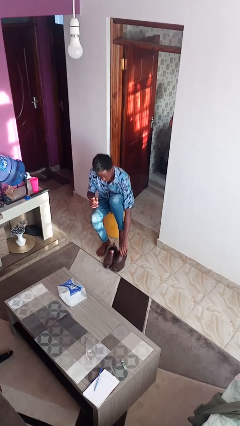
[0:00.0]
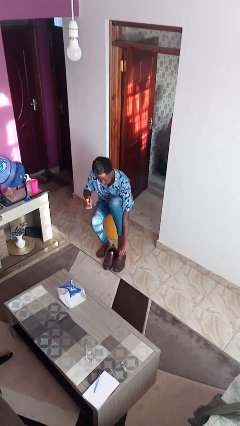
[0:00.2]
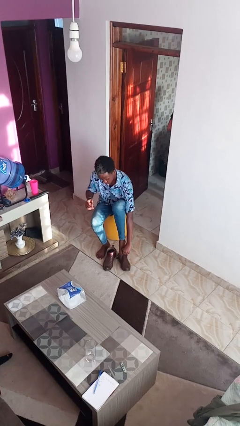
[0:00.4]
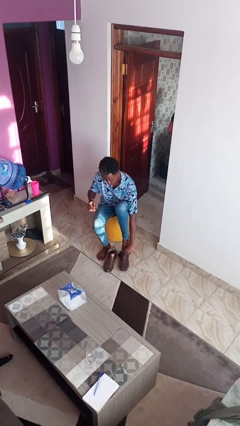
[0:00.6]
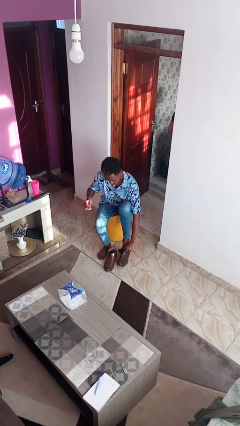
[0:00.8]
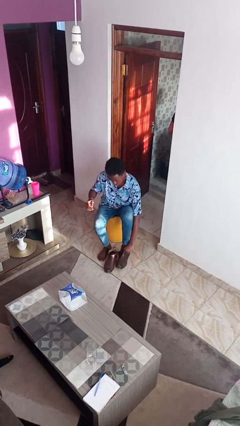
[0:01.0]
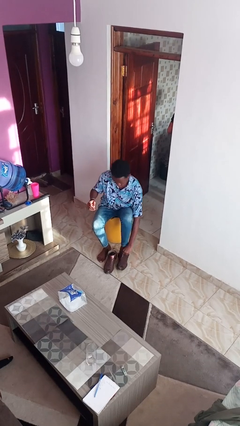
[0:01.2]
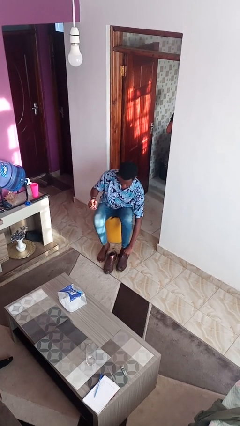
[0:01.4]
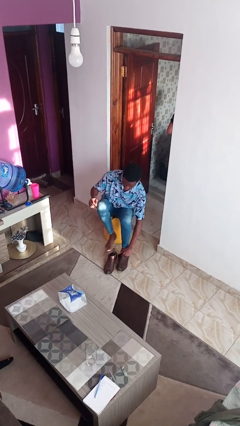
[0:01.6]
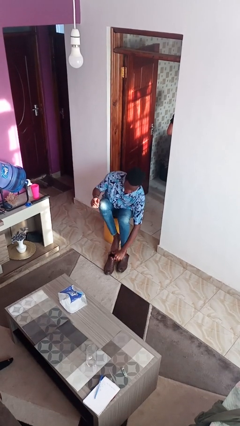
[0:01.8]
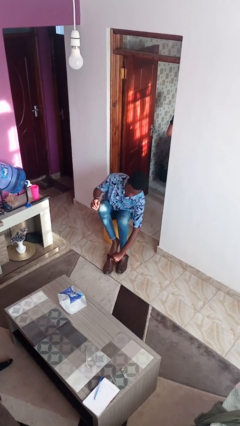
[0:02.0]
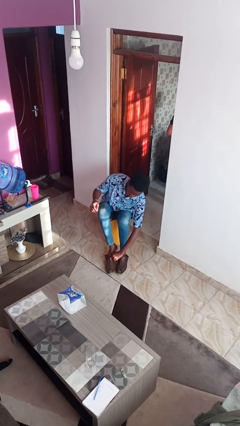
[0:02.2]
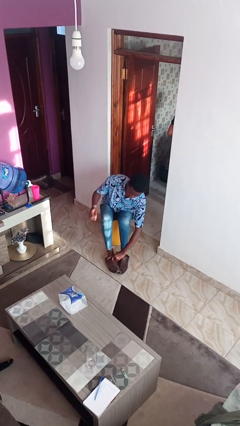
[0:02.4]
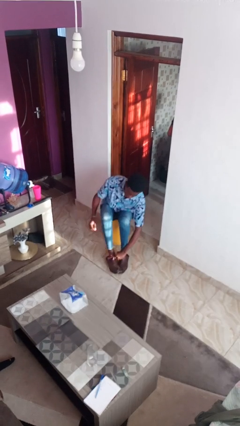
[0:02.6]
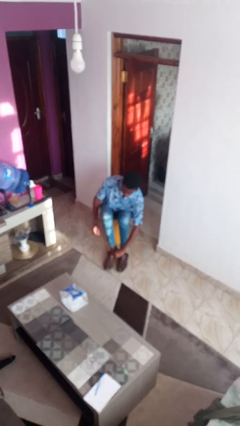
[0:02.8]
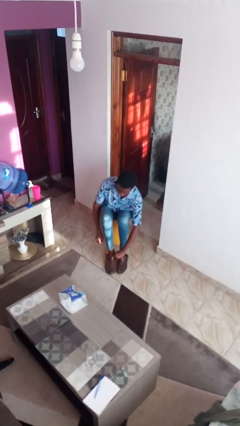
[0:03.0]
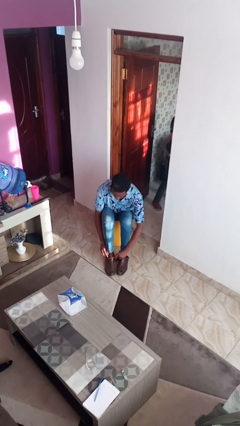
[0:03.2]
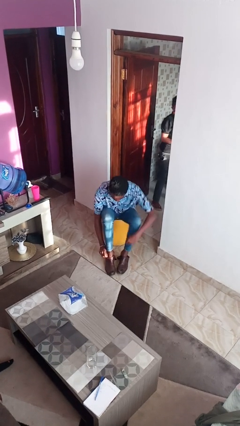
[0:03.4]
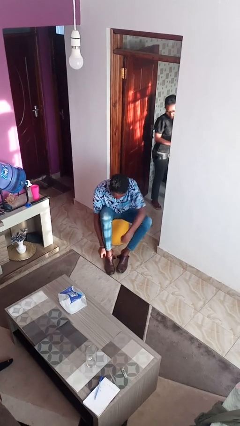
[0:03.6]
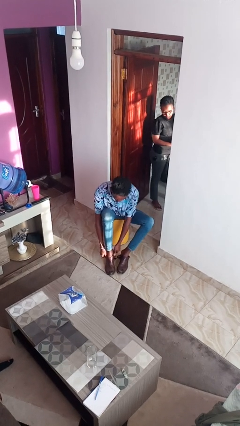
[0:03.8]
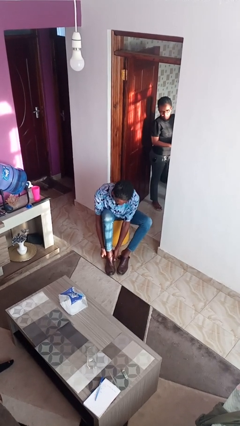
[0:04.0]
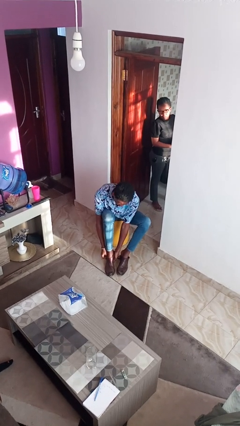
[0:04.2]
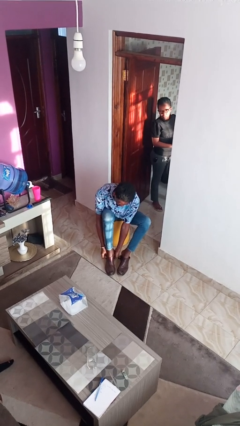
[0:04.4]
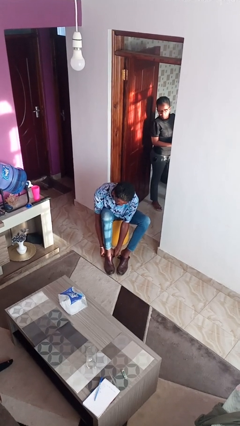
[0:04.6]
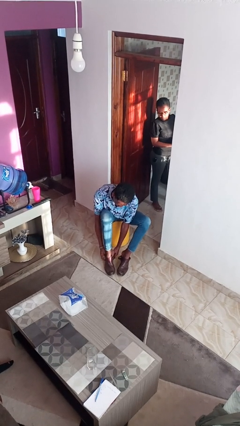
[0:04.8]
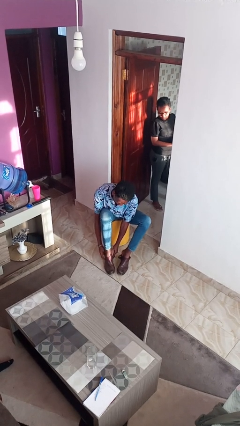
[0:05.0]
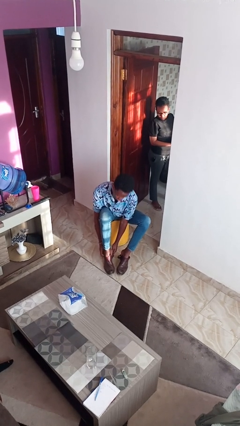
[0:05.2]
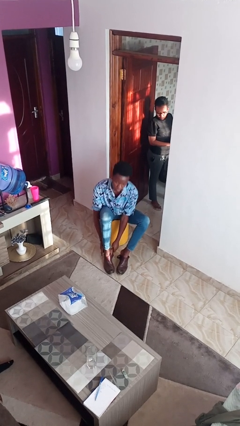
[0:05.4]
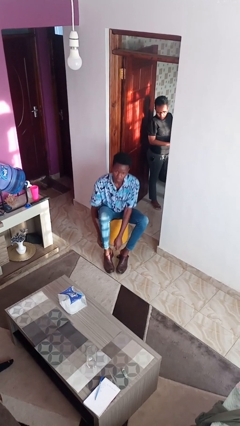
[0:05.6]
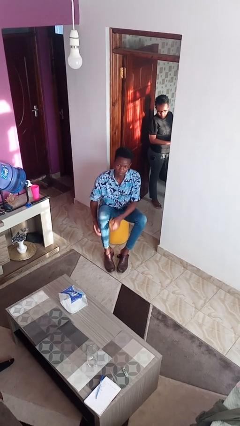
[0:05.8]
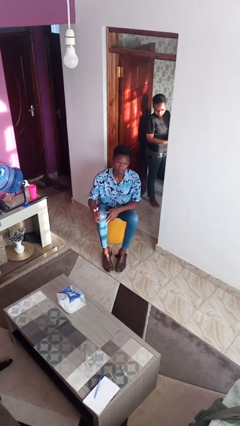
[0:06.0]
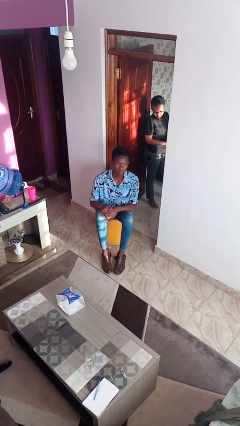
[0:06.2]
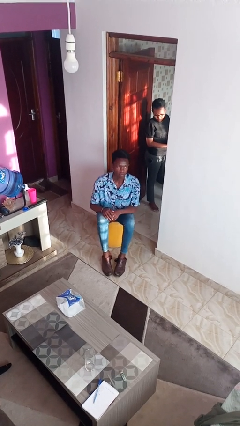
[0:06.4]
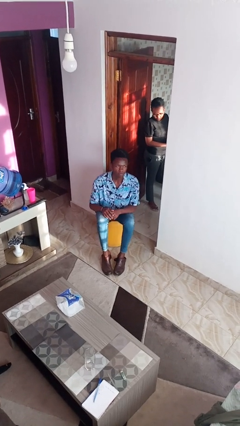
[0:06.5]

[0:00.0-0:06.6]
person puts on boots

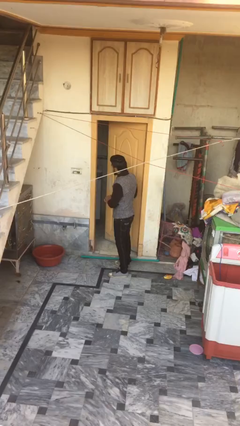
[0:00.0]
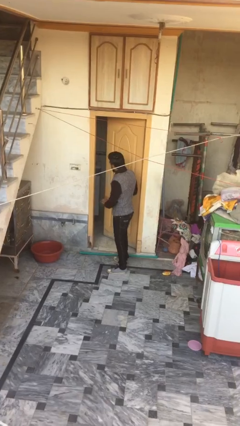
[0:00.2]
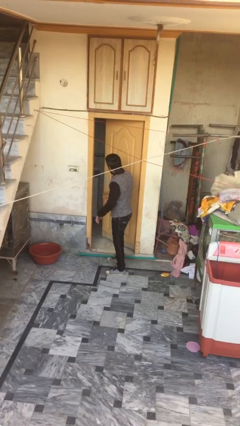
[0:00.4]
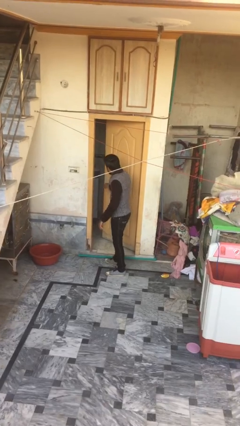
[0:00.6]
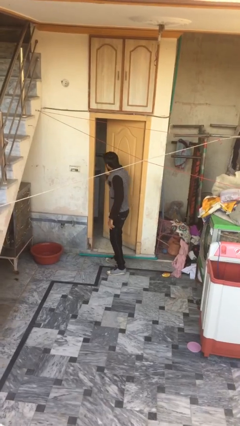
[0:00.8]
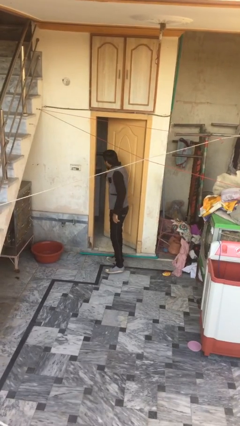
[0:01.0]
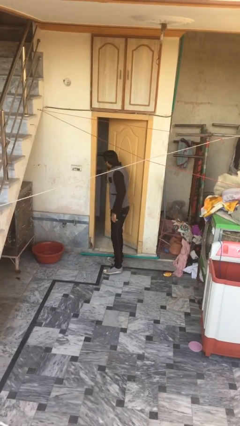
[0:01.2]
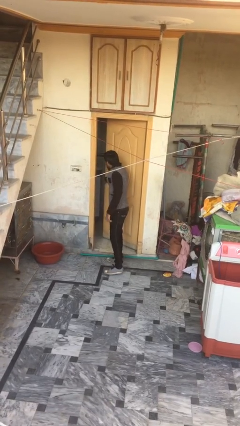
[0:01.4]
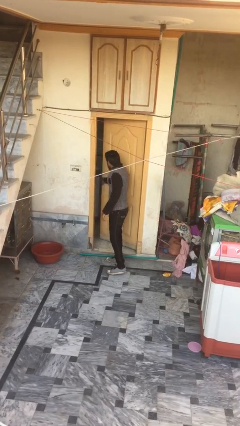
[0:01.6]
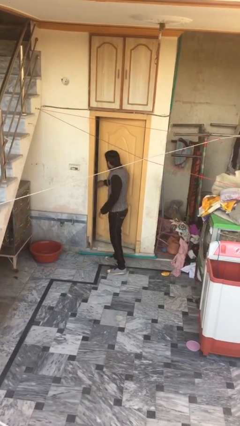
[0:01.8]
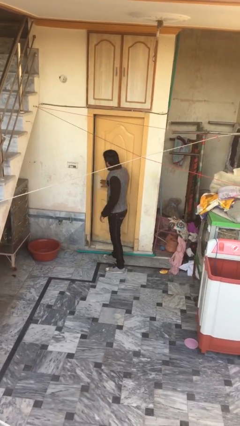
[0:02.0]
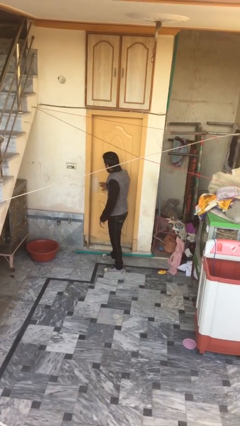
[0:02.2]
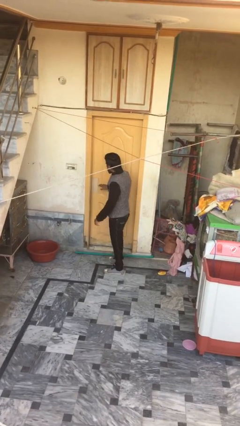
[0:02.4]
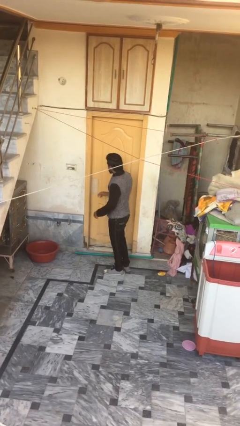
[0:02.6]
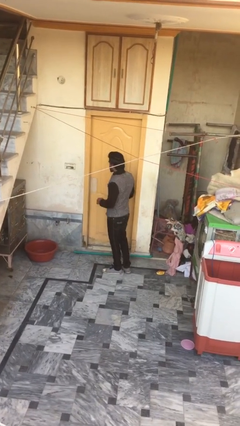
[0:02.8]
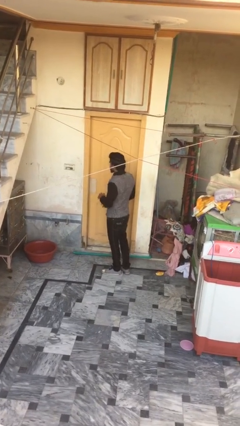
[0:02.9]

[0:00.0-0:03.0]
person closes facility door

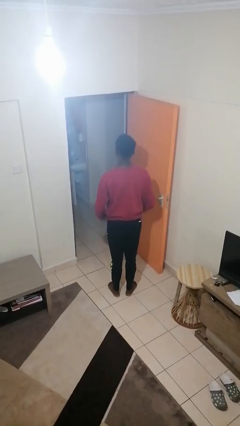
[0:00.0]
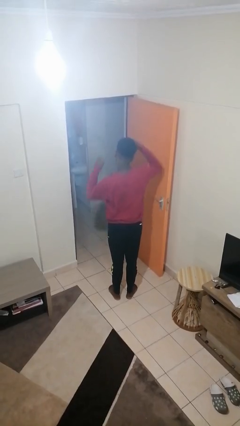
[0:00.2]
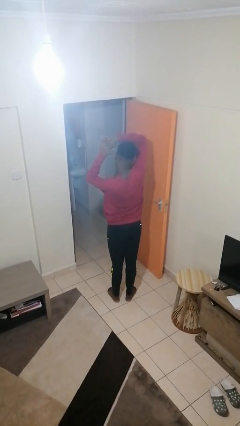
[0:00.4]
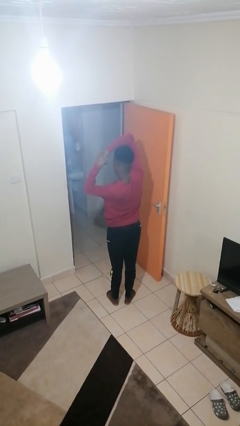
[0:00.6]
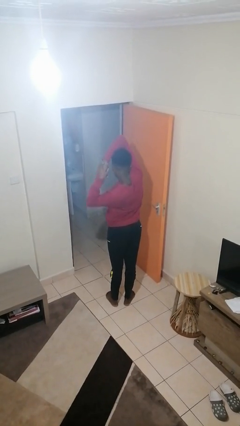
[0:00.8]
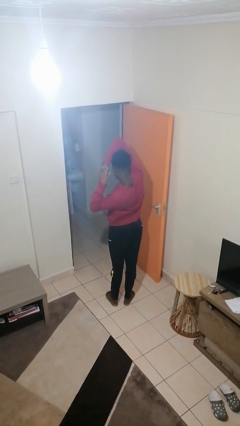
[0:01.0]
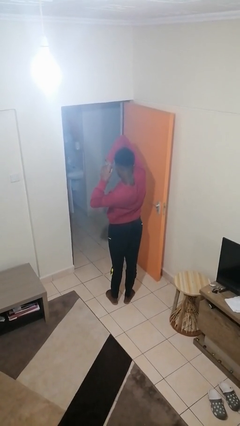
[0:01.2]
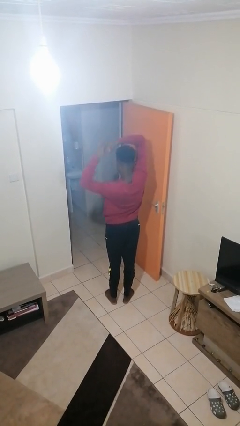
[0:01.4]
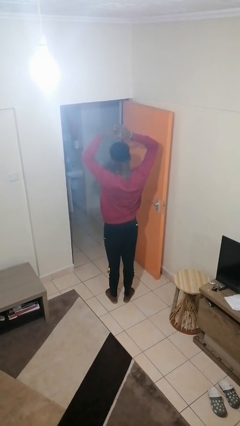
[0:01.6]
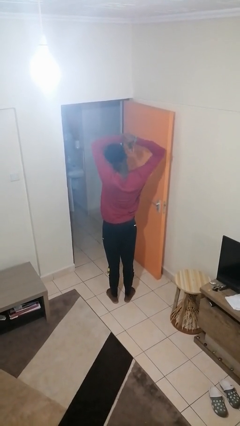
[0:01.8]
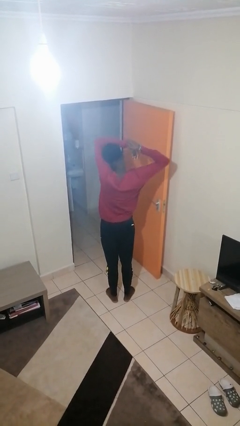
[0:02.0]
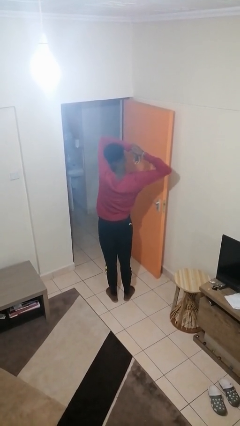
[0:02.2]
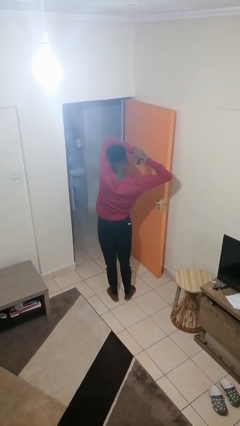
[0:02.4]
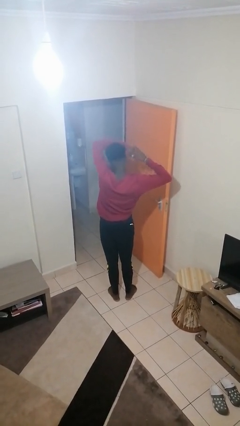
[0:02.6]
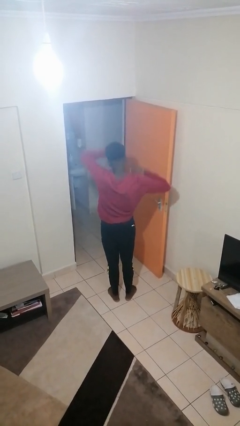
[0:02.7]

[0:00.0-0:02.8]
person stretches arms over head

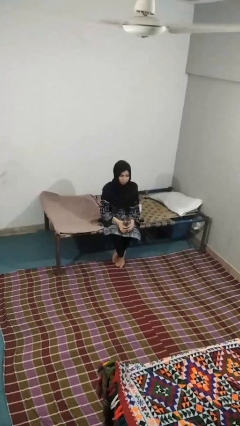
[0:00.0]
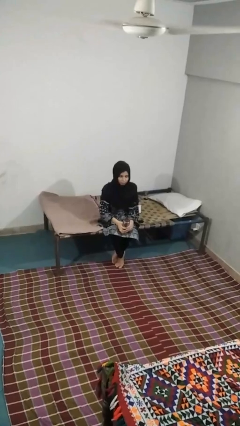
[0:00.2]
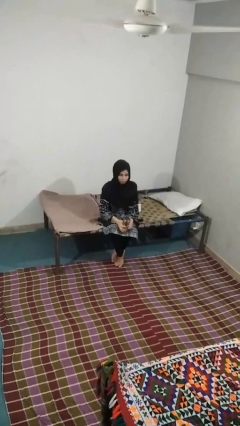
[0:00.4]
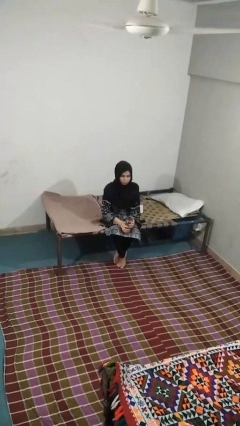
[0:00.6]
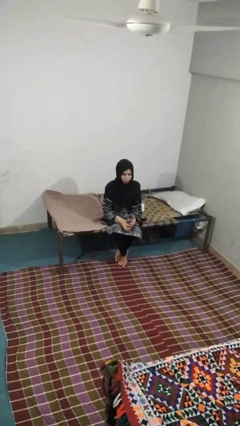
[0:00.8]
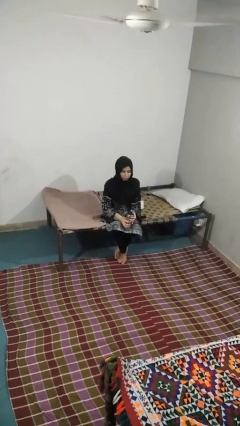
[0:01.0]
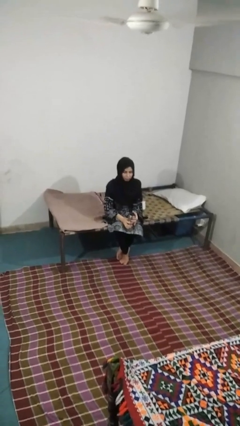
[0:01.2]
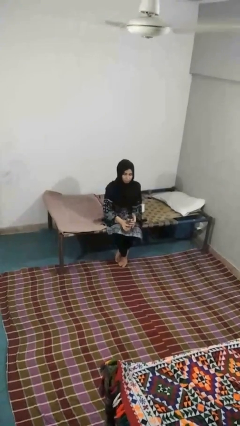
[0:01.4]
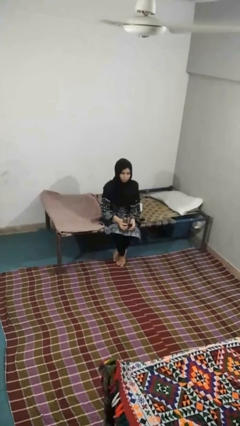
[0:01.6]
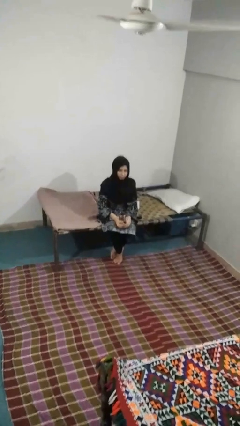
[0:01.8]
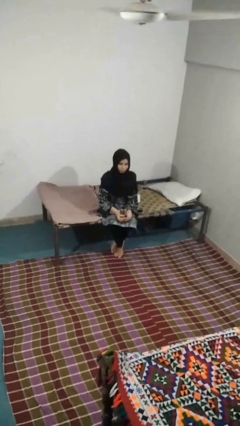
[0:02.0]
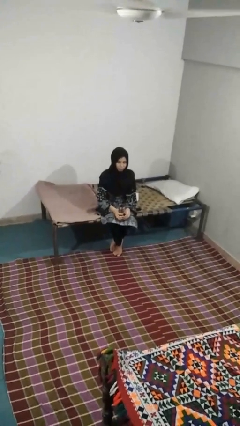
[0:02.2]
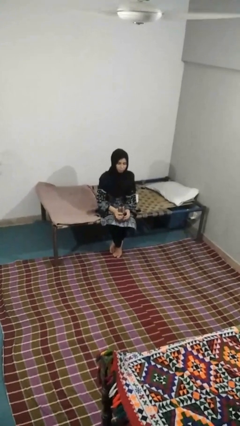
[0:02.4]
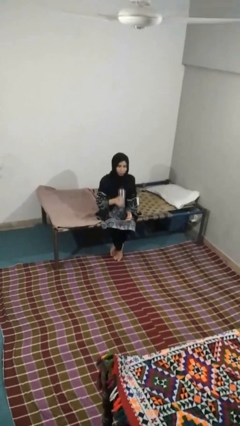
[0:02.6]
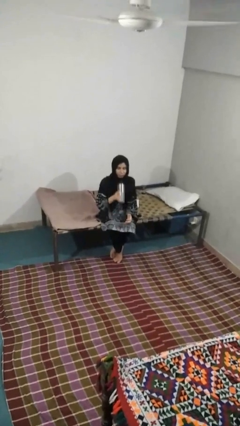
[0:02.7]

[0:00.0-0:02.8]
person opens beverage can

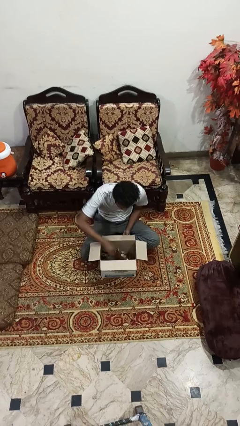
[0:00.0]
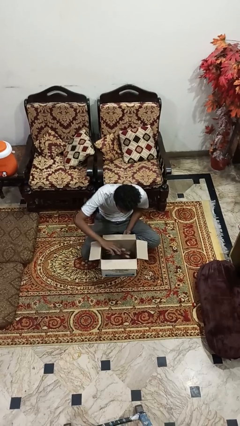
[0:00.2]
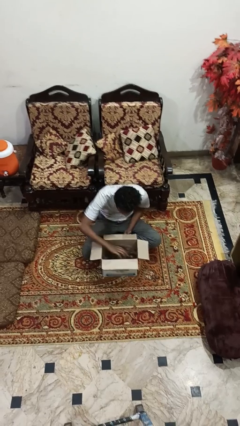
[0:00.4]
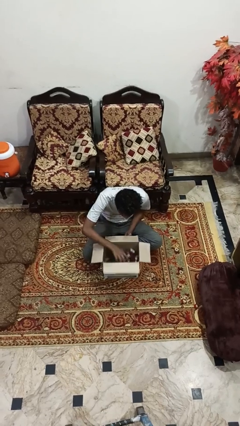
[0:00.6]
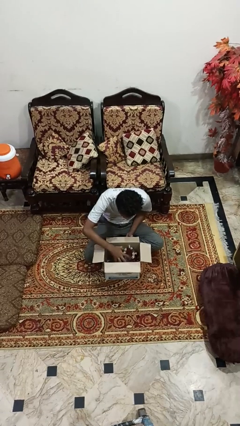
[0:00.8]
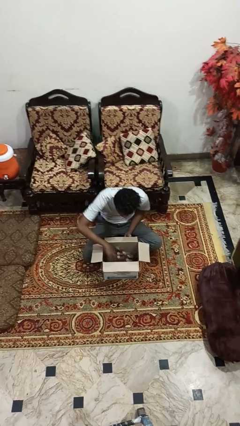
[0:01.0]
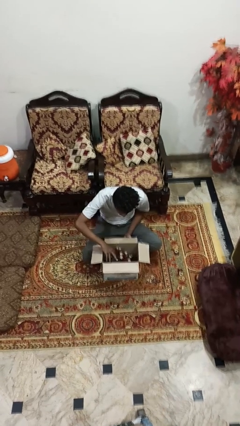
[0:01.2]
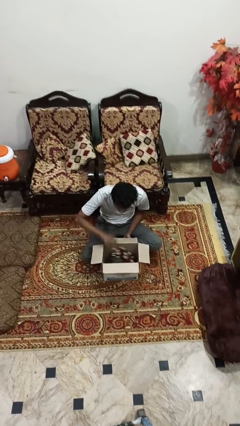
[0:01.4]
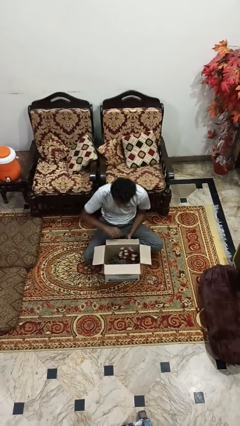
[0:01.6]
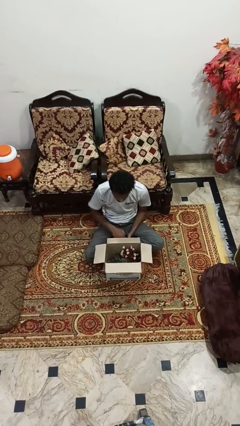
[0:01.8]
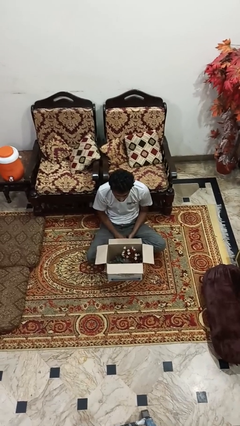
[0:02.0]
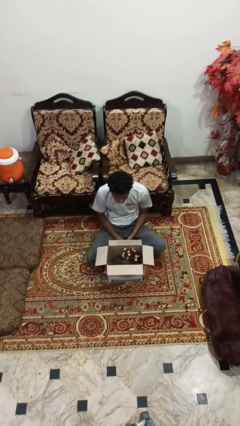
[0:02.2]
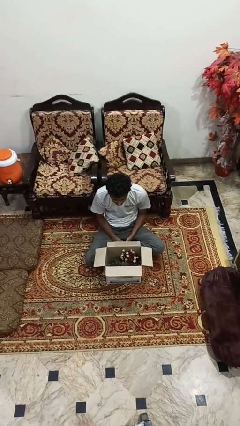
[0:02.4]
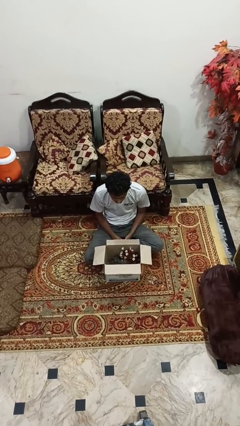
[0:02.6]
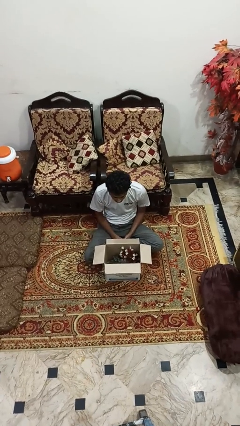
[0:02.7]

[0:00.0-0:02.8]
person searches in box
